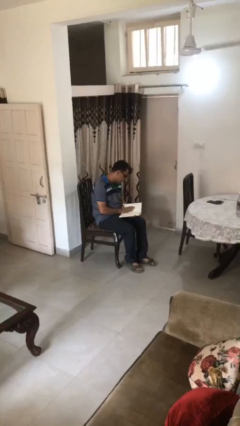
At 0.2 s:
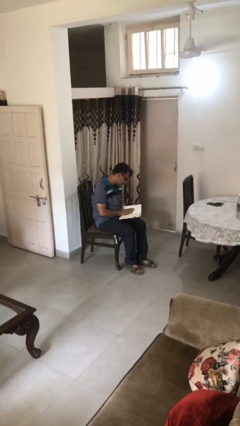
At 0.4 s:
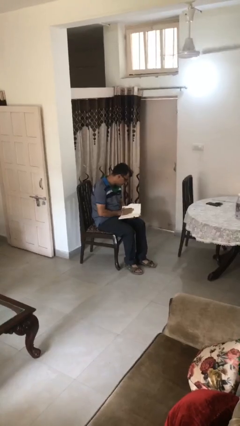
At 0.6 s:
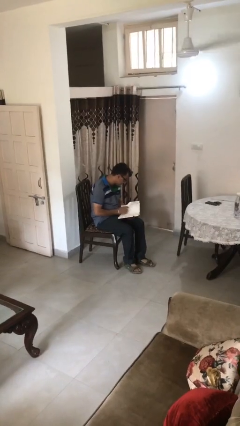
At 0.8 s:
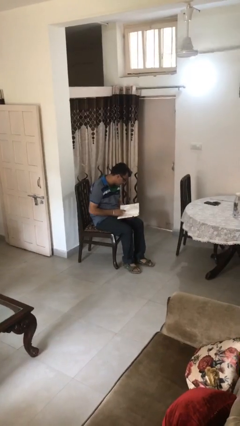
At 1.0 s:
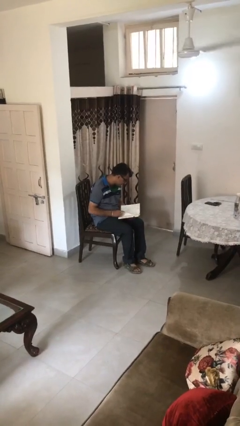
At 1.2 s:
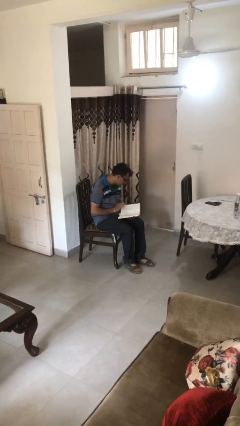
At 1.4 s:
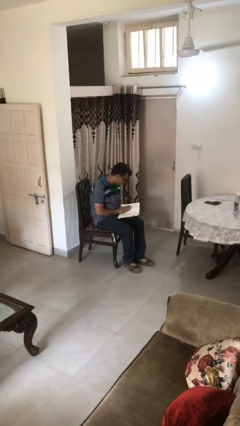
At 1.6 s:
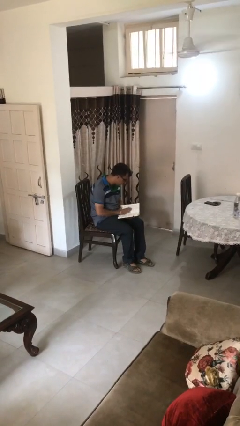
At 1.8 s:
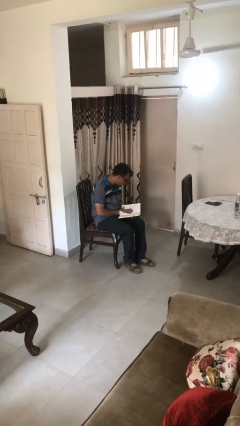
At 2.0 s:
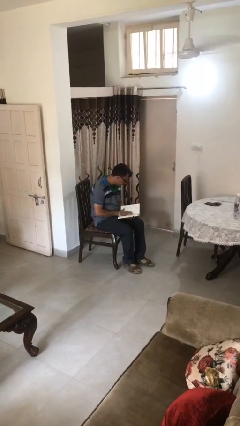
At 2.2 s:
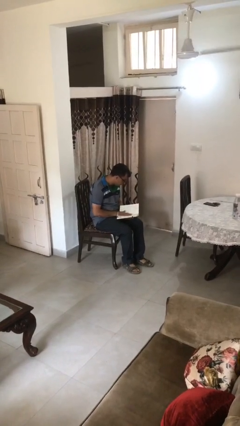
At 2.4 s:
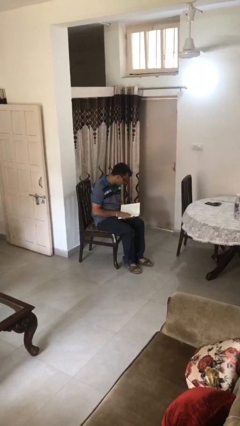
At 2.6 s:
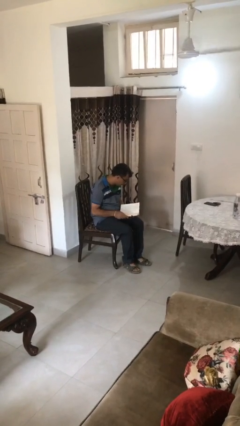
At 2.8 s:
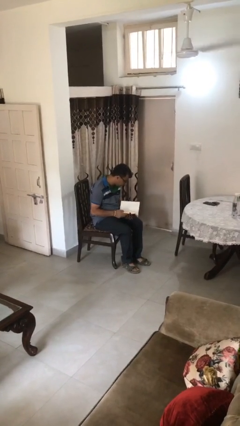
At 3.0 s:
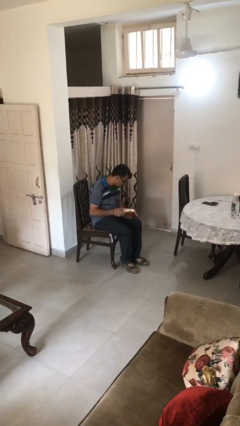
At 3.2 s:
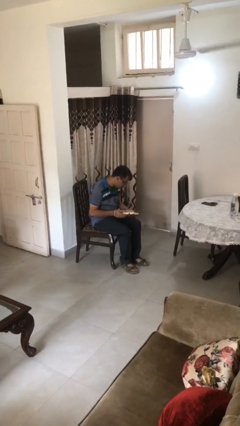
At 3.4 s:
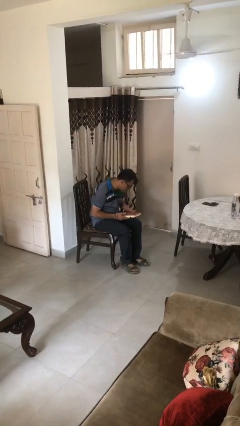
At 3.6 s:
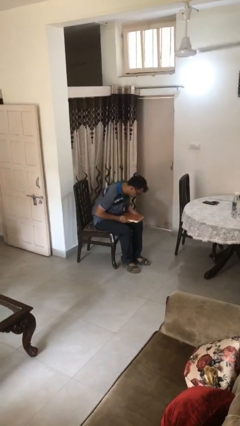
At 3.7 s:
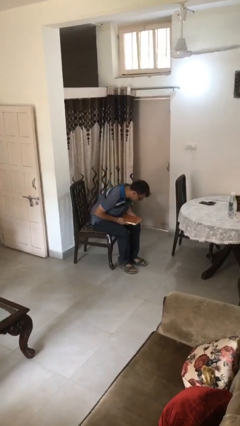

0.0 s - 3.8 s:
person reads document

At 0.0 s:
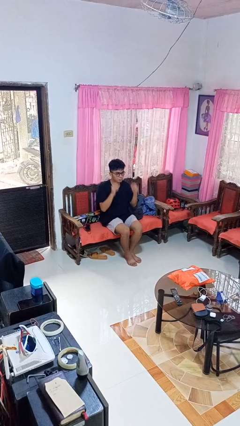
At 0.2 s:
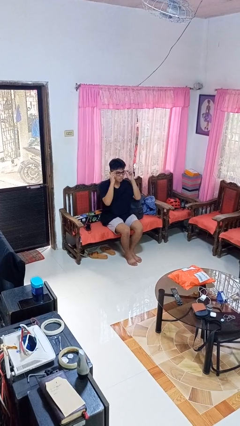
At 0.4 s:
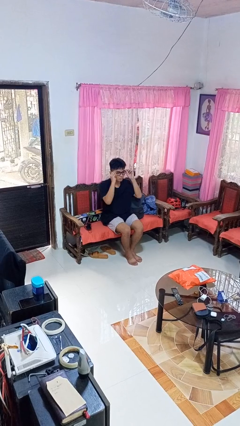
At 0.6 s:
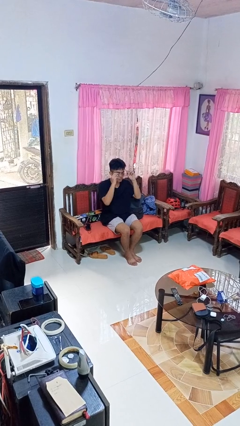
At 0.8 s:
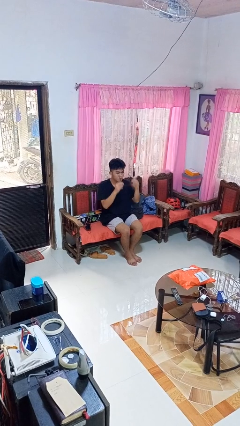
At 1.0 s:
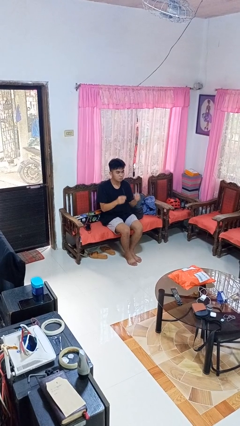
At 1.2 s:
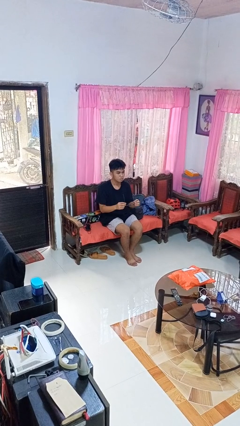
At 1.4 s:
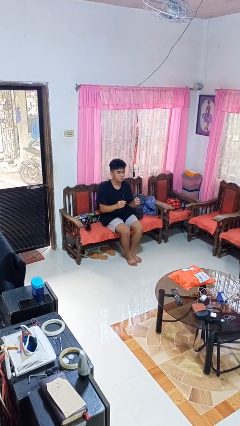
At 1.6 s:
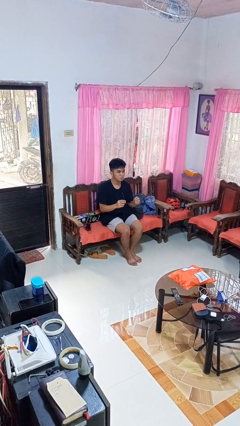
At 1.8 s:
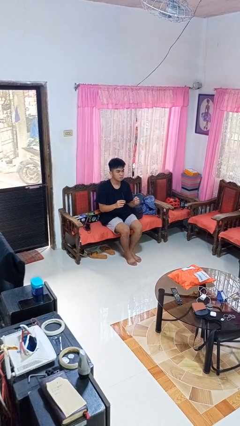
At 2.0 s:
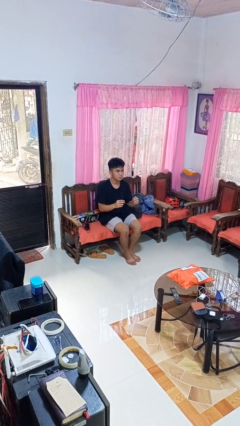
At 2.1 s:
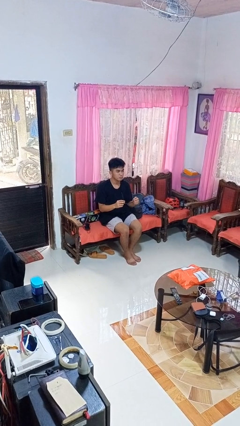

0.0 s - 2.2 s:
person takes off glasses

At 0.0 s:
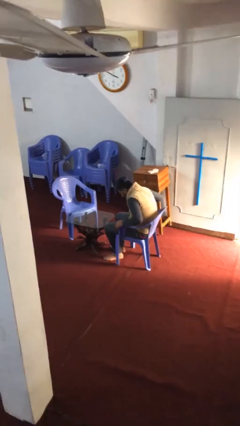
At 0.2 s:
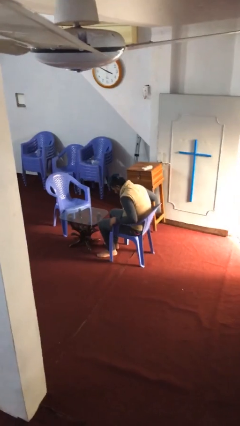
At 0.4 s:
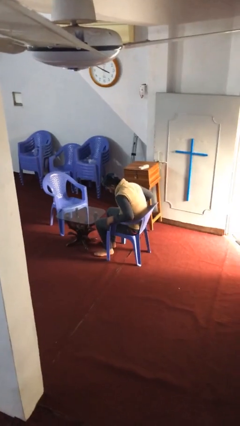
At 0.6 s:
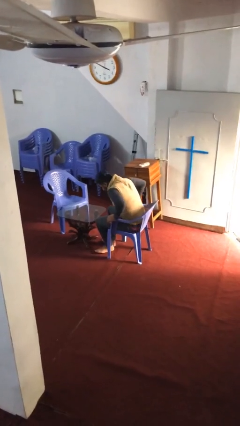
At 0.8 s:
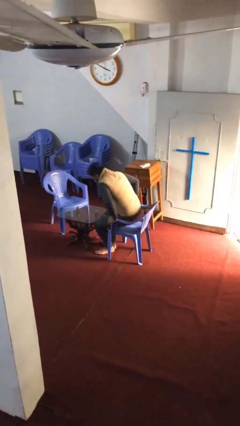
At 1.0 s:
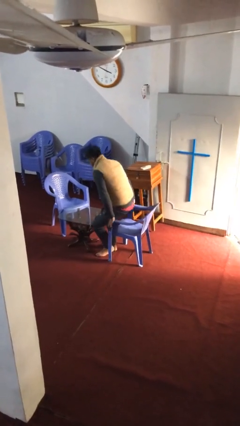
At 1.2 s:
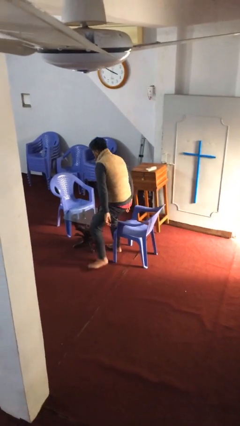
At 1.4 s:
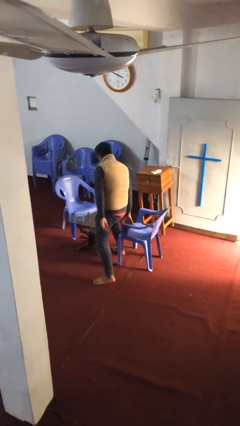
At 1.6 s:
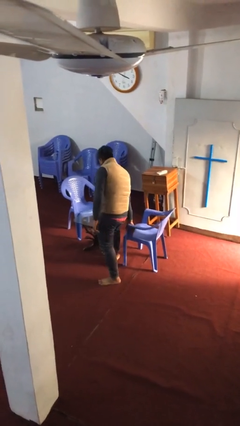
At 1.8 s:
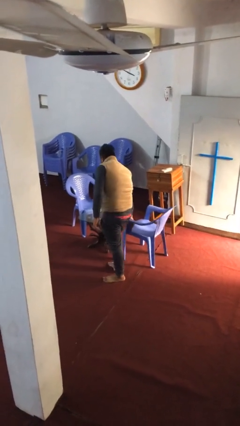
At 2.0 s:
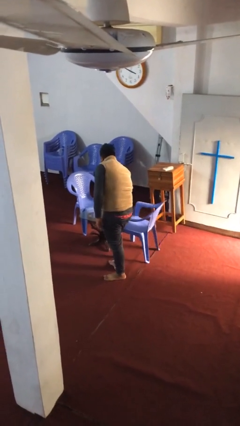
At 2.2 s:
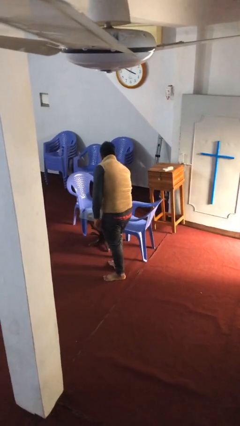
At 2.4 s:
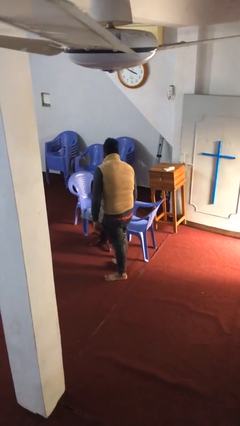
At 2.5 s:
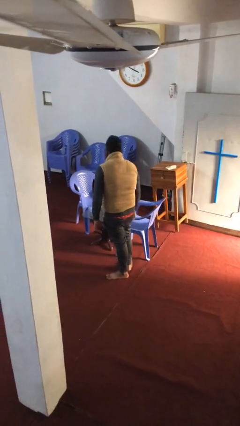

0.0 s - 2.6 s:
person stands up

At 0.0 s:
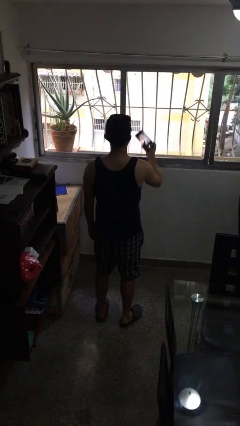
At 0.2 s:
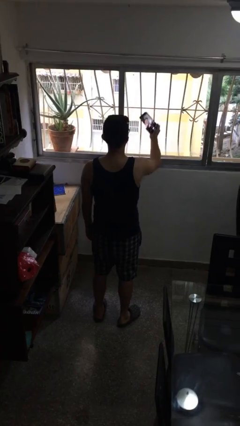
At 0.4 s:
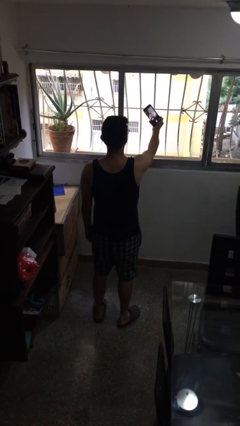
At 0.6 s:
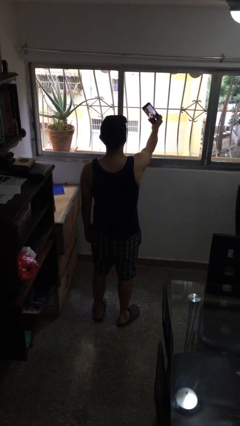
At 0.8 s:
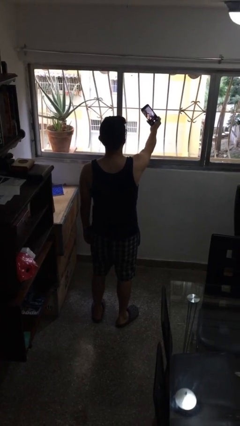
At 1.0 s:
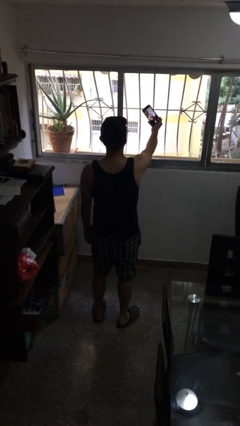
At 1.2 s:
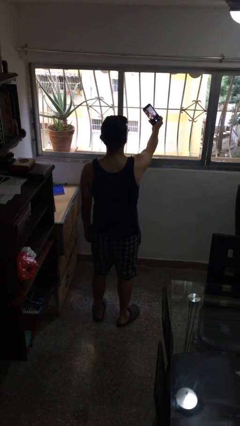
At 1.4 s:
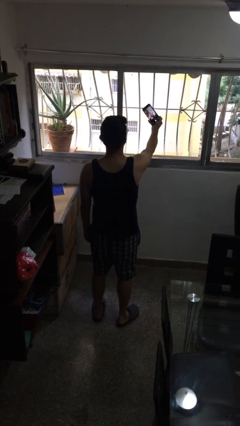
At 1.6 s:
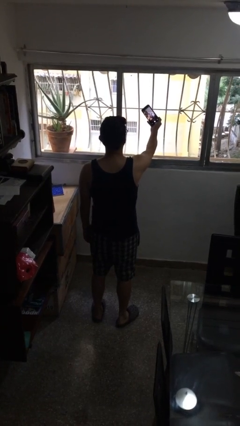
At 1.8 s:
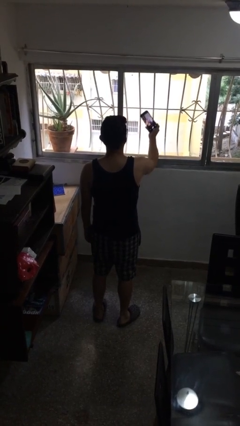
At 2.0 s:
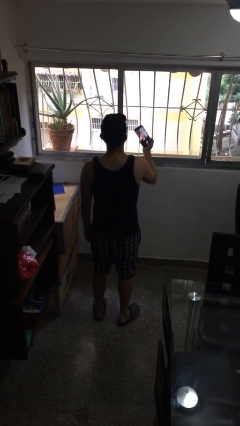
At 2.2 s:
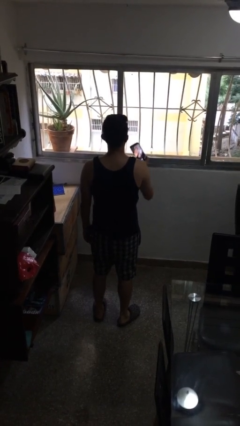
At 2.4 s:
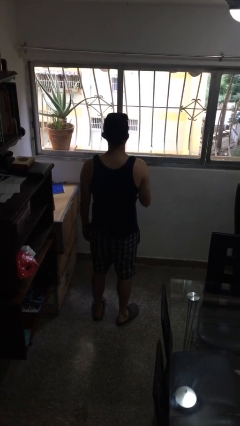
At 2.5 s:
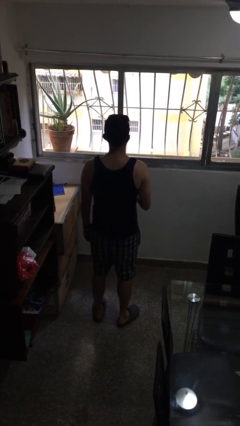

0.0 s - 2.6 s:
person takes selfie

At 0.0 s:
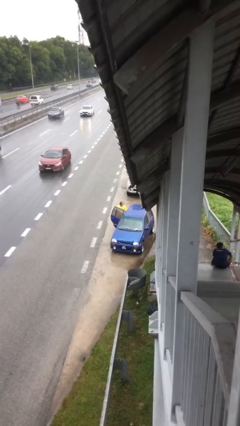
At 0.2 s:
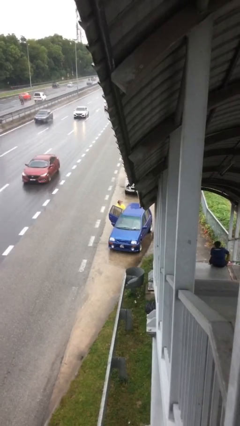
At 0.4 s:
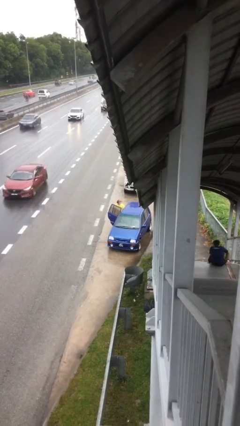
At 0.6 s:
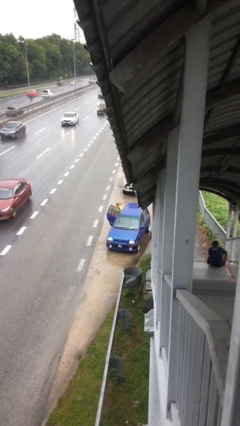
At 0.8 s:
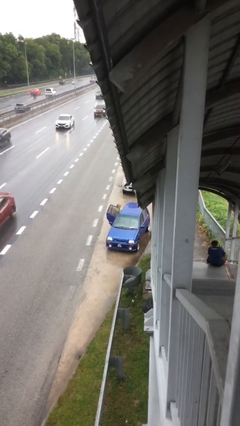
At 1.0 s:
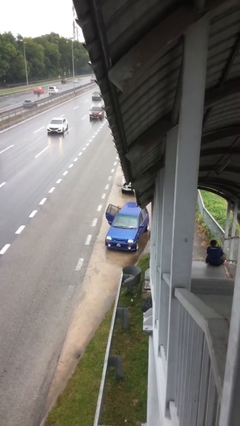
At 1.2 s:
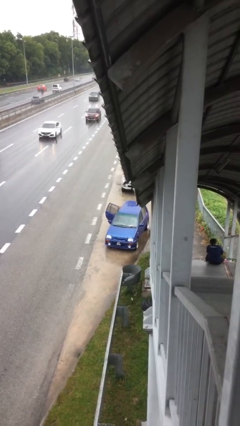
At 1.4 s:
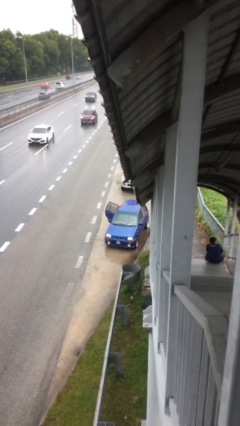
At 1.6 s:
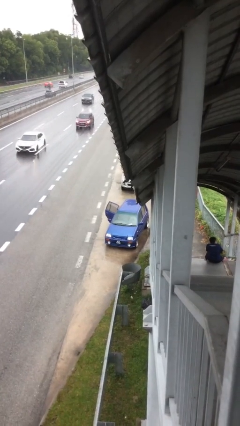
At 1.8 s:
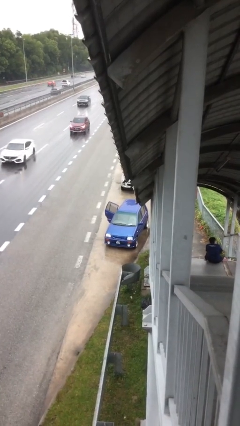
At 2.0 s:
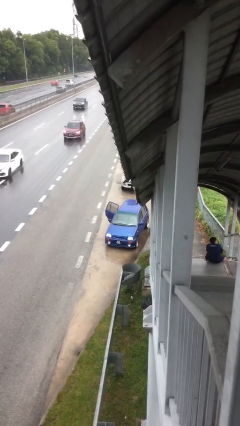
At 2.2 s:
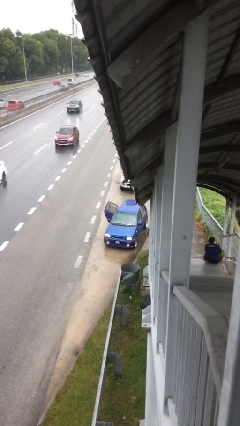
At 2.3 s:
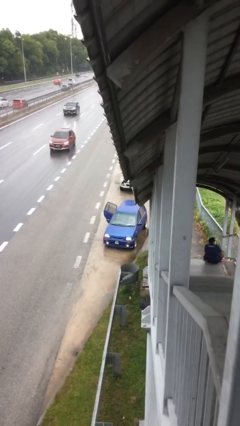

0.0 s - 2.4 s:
person enters car

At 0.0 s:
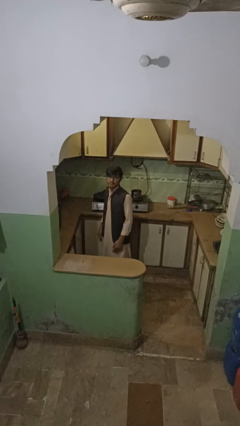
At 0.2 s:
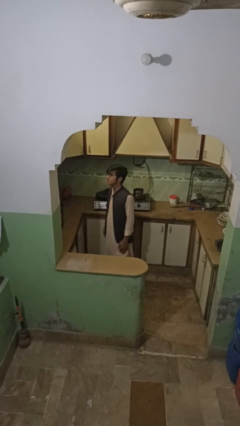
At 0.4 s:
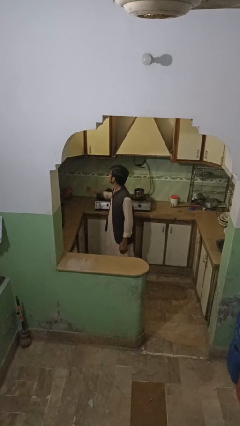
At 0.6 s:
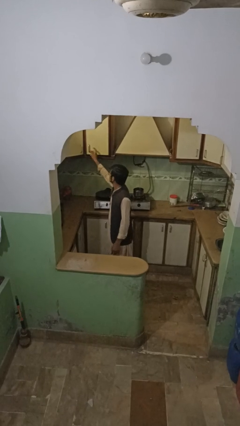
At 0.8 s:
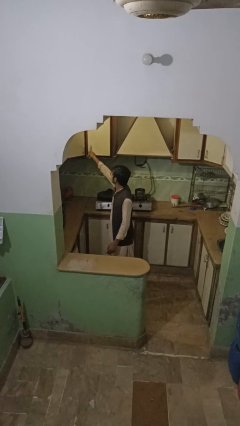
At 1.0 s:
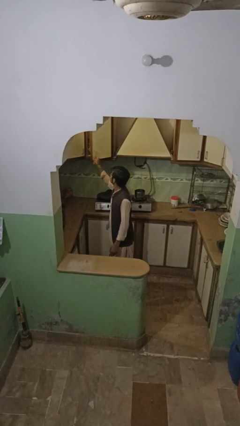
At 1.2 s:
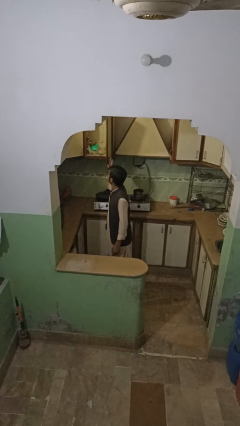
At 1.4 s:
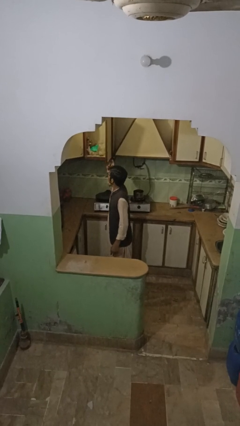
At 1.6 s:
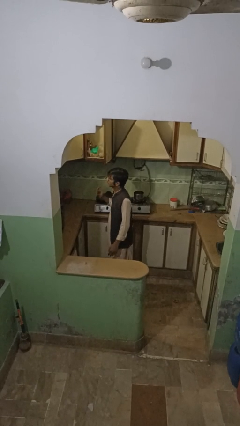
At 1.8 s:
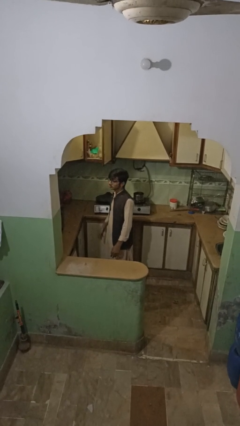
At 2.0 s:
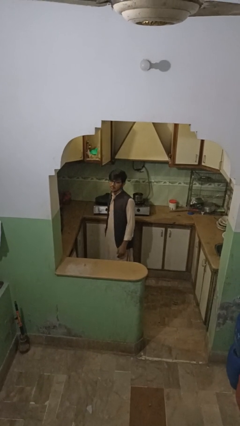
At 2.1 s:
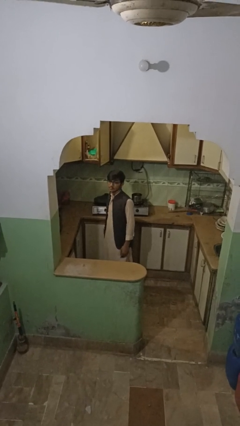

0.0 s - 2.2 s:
person opens cabinet

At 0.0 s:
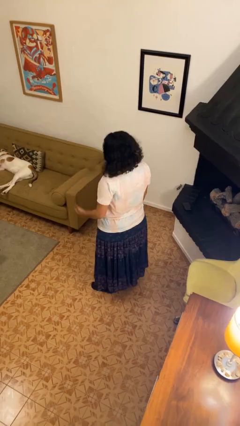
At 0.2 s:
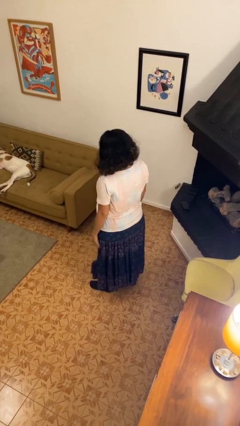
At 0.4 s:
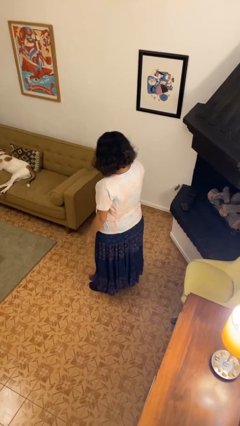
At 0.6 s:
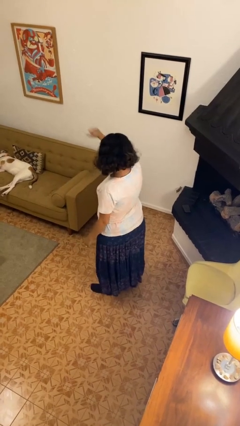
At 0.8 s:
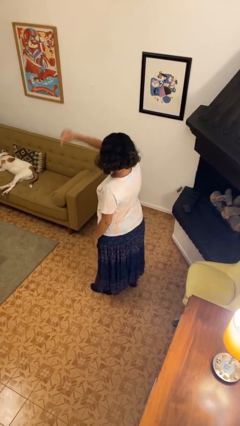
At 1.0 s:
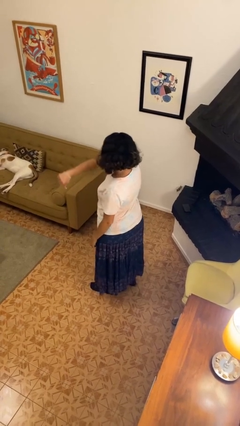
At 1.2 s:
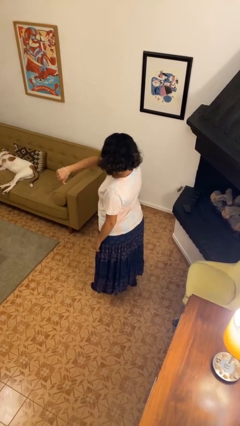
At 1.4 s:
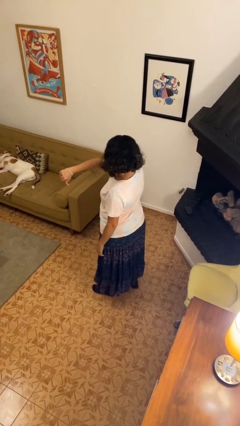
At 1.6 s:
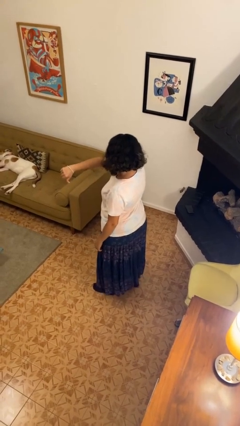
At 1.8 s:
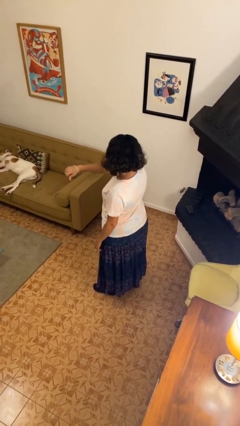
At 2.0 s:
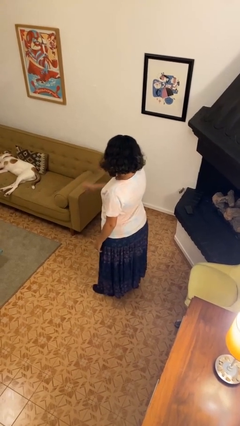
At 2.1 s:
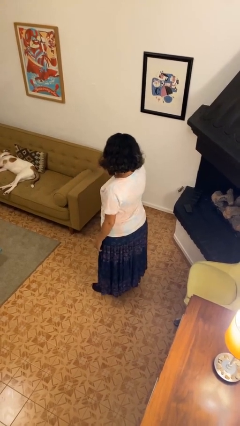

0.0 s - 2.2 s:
person gestures thumbs down
